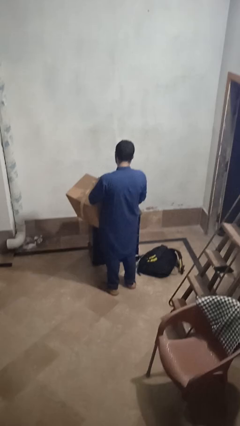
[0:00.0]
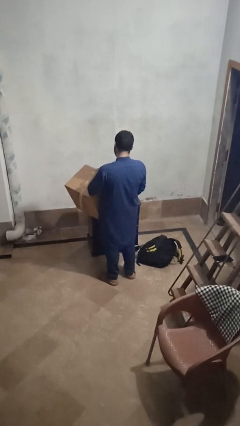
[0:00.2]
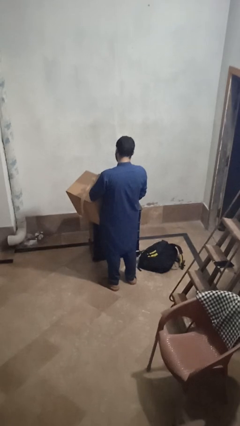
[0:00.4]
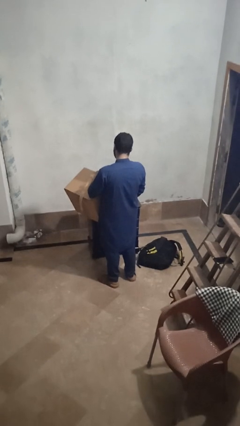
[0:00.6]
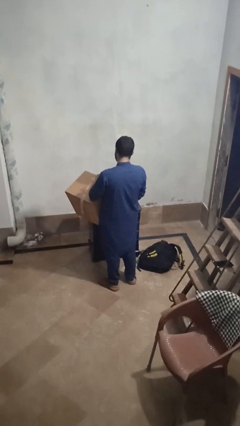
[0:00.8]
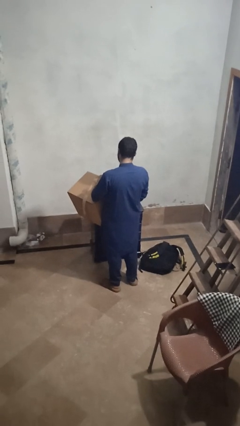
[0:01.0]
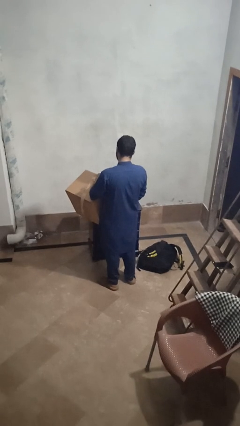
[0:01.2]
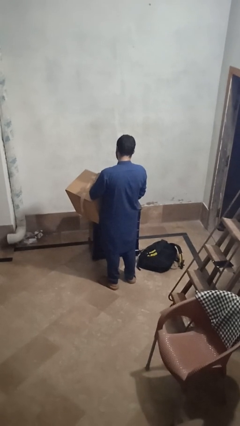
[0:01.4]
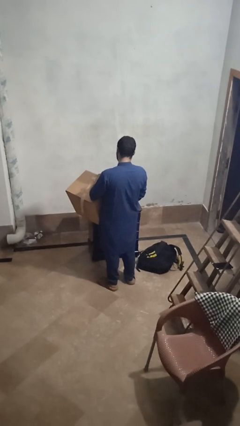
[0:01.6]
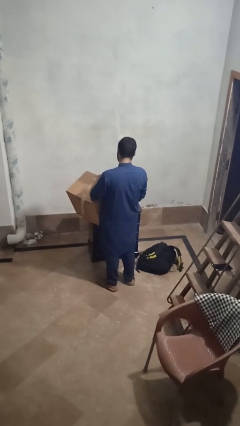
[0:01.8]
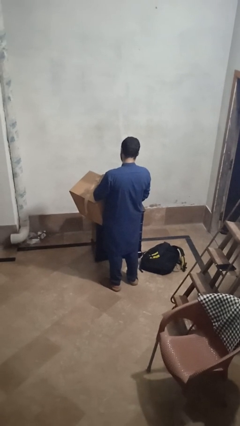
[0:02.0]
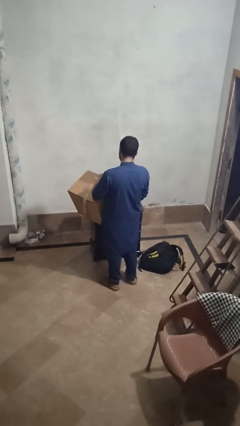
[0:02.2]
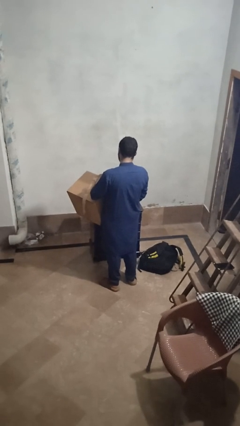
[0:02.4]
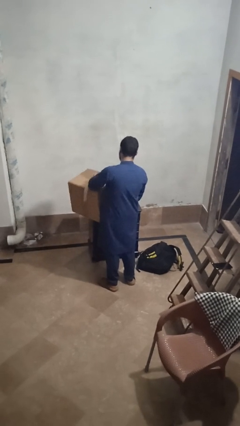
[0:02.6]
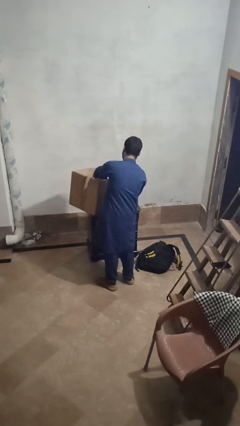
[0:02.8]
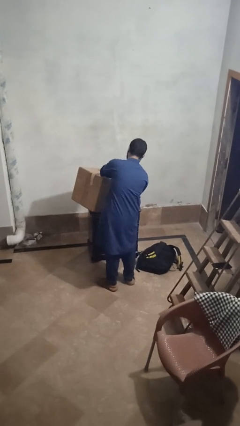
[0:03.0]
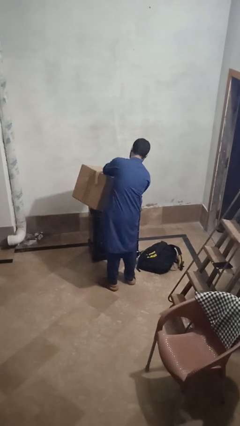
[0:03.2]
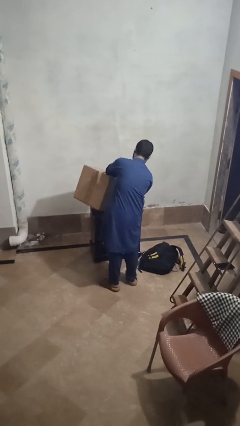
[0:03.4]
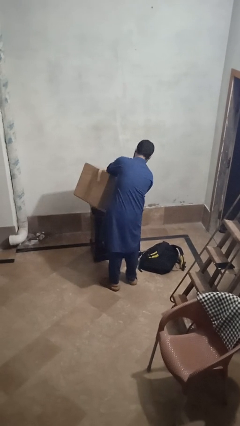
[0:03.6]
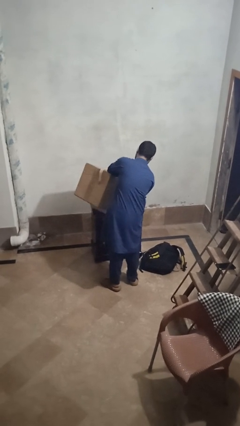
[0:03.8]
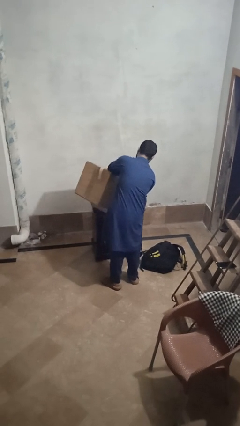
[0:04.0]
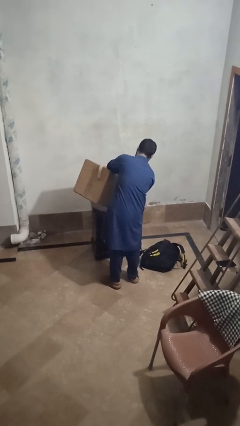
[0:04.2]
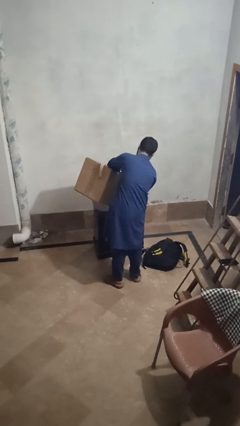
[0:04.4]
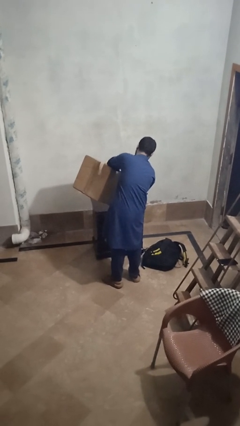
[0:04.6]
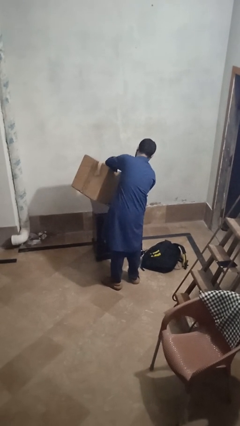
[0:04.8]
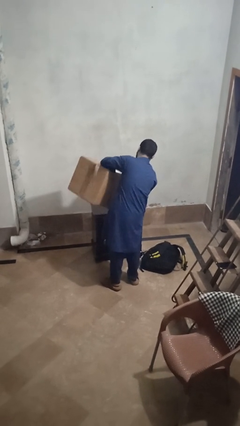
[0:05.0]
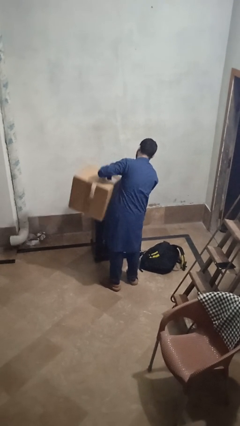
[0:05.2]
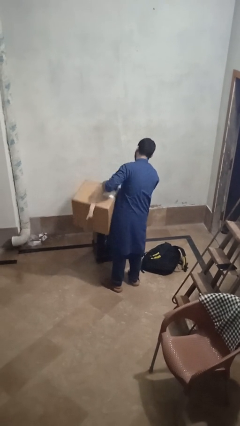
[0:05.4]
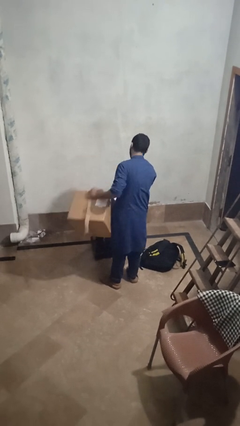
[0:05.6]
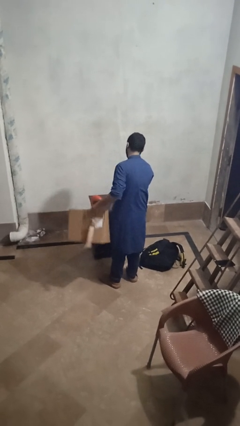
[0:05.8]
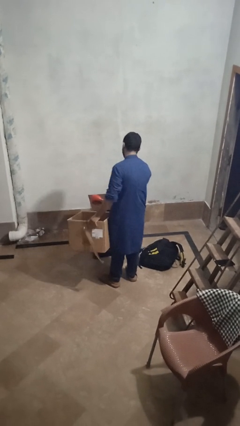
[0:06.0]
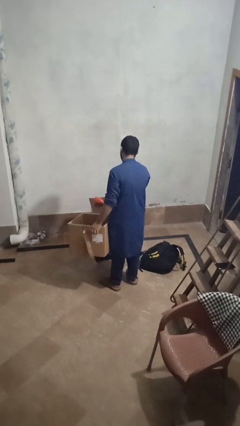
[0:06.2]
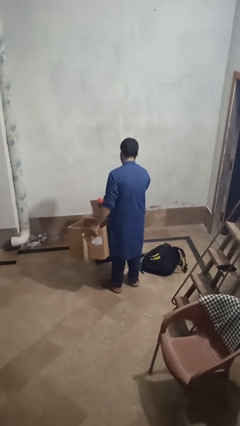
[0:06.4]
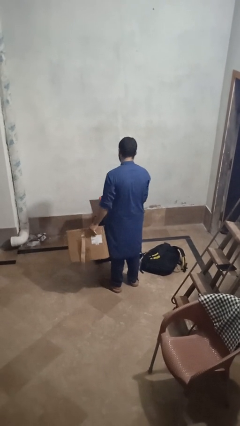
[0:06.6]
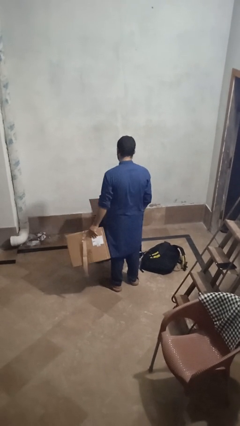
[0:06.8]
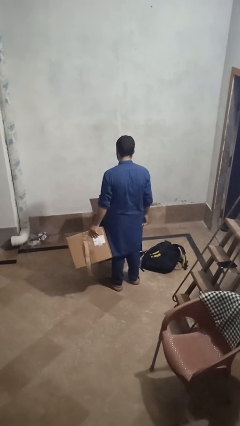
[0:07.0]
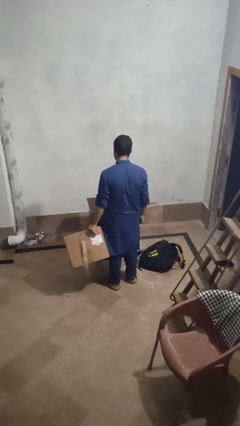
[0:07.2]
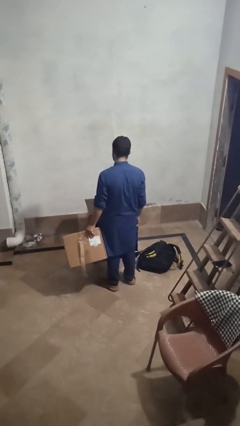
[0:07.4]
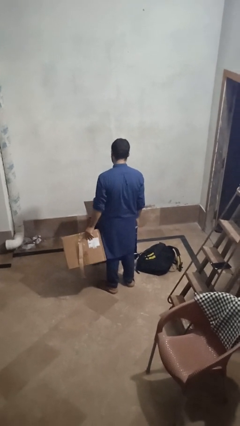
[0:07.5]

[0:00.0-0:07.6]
person unloads box onto table

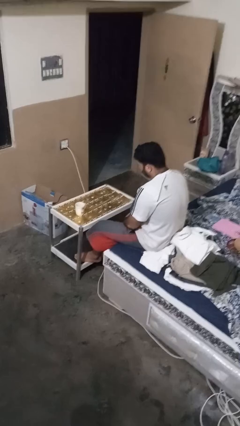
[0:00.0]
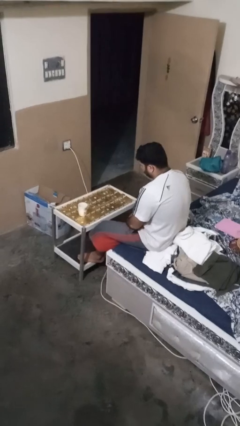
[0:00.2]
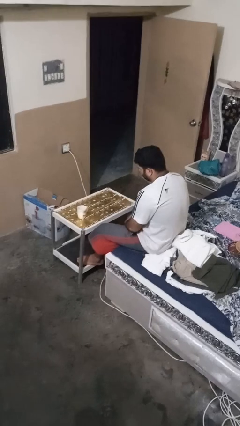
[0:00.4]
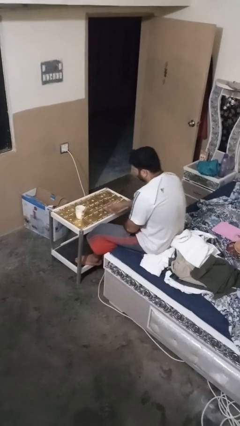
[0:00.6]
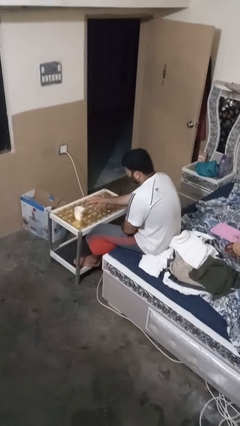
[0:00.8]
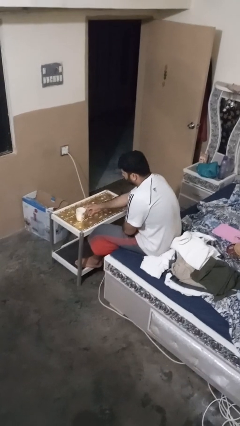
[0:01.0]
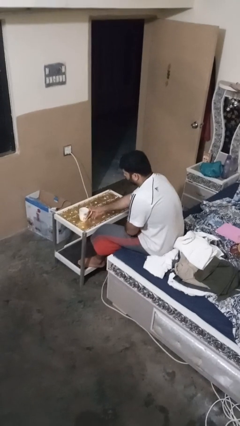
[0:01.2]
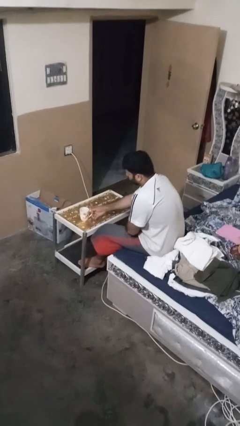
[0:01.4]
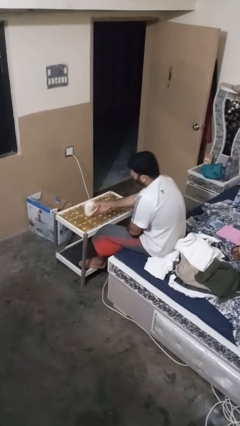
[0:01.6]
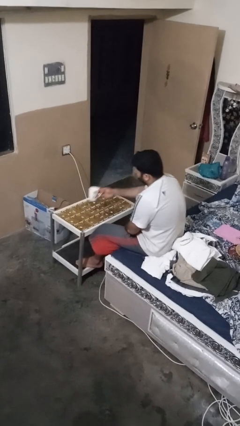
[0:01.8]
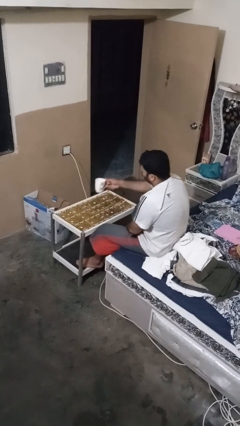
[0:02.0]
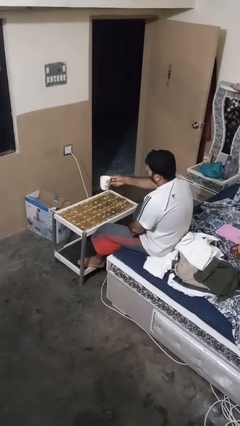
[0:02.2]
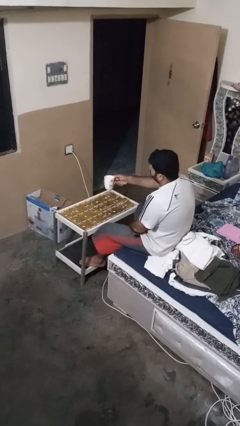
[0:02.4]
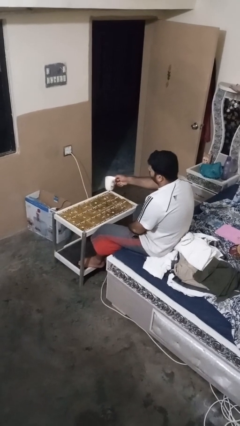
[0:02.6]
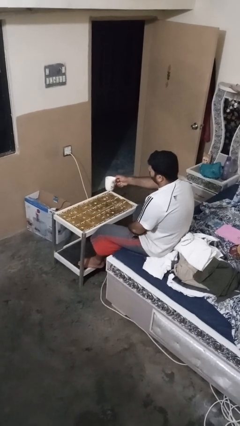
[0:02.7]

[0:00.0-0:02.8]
person picks up object from table

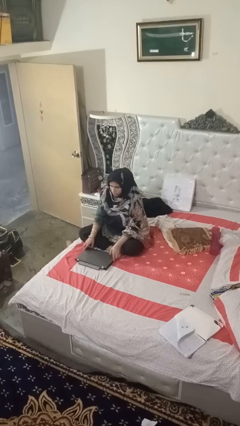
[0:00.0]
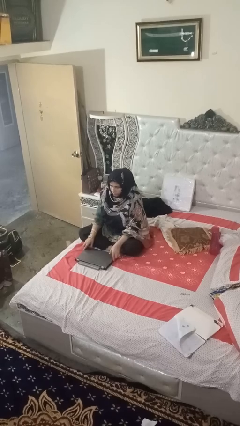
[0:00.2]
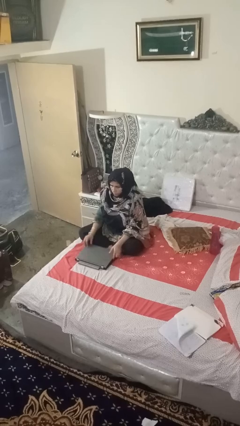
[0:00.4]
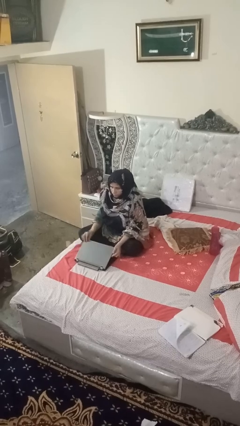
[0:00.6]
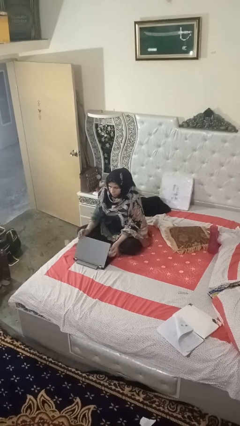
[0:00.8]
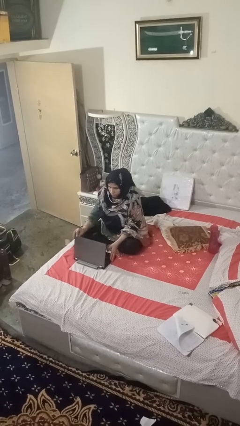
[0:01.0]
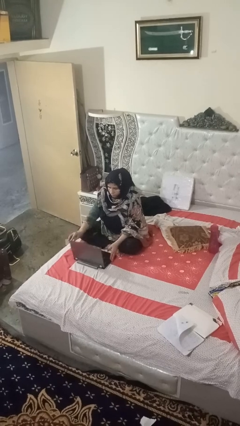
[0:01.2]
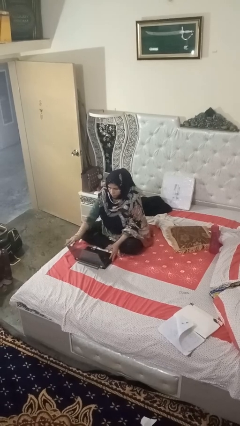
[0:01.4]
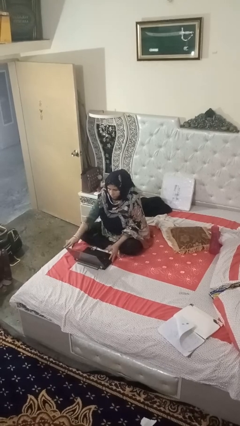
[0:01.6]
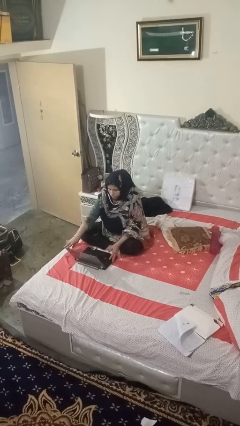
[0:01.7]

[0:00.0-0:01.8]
person opens laptop

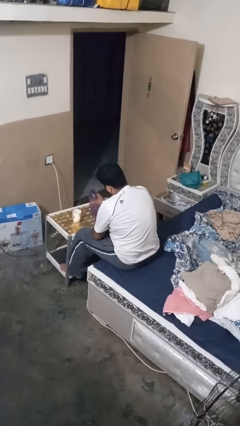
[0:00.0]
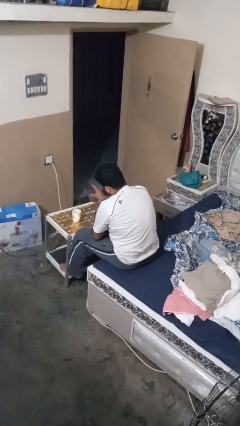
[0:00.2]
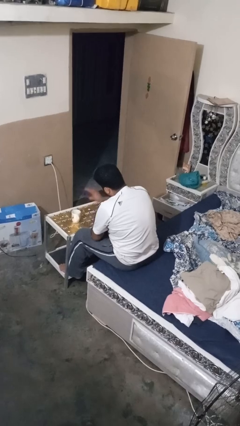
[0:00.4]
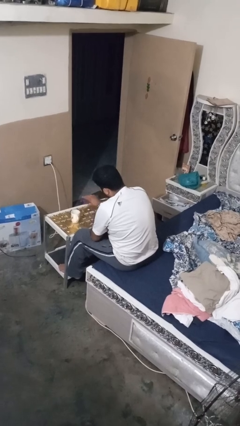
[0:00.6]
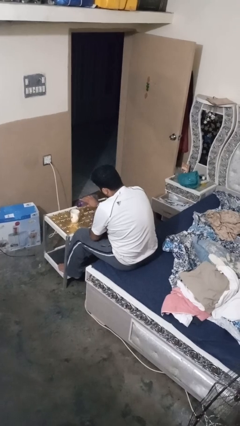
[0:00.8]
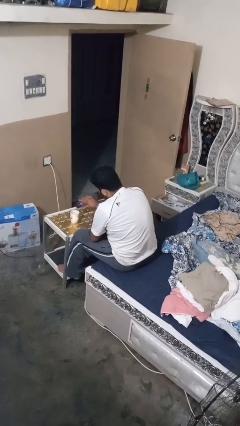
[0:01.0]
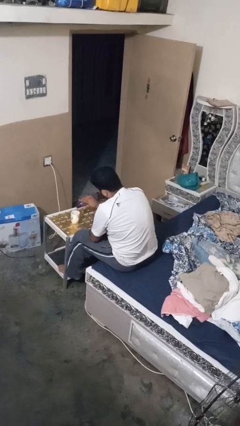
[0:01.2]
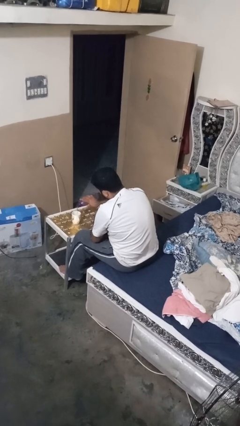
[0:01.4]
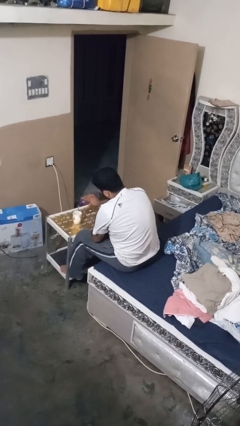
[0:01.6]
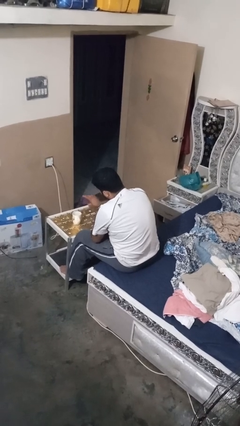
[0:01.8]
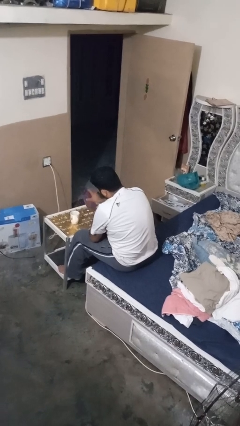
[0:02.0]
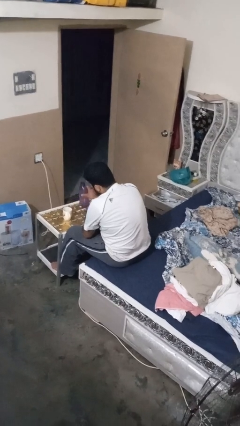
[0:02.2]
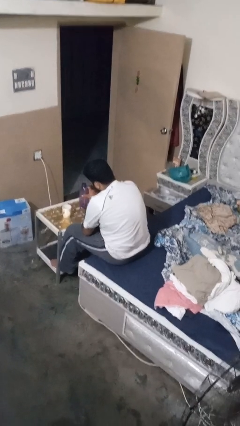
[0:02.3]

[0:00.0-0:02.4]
person pours liquid into cup

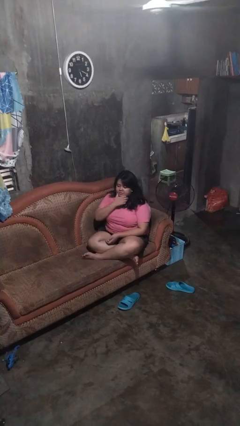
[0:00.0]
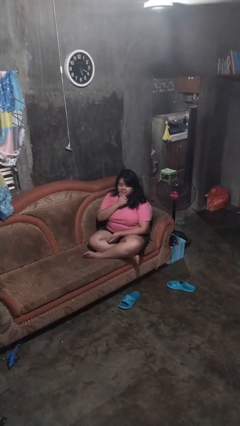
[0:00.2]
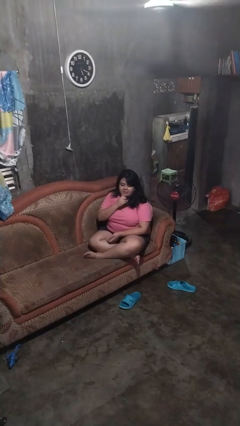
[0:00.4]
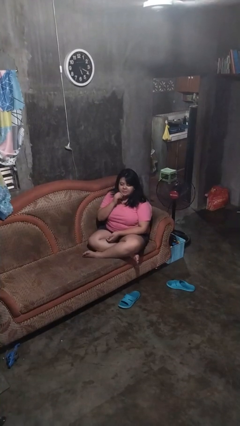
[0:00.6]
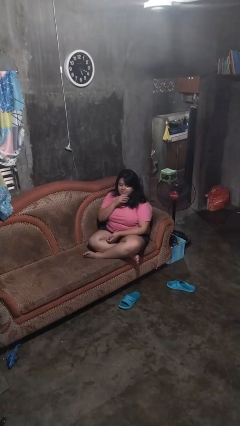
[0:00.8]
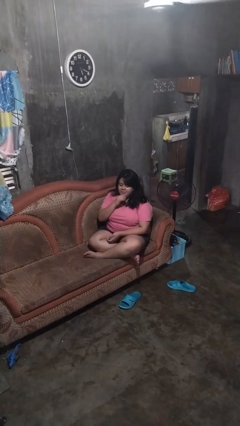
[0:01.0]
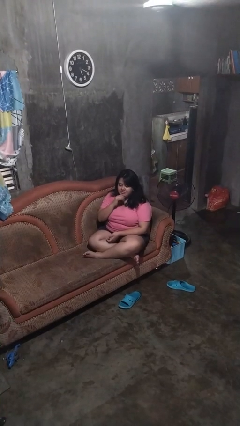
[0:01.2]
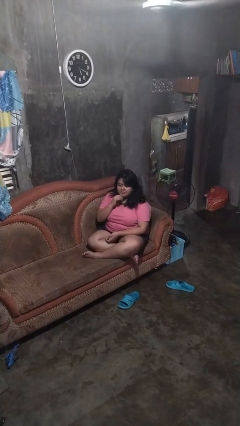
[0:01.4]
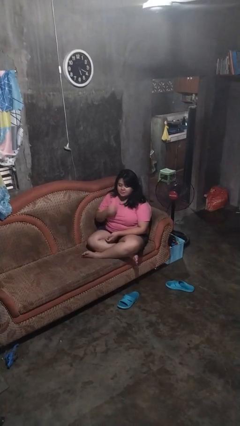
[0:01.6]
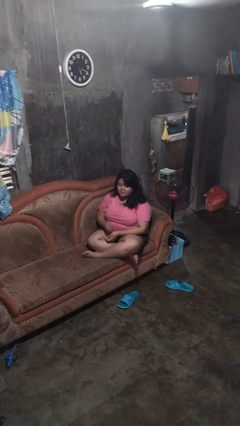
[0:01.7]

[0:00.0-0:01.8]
person strokes chin

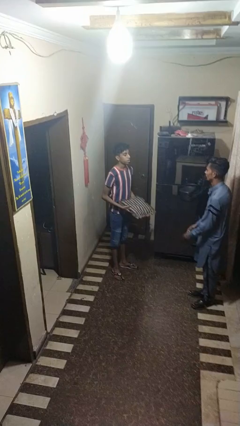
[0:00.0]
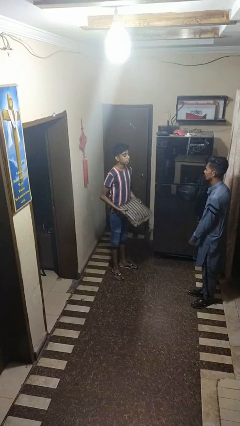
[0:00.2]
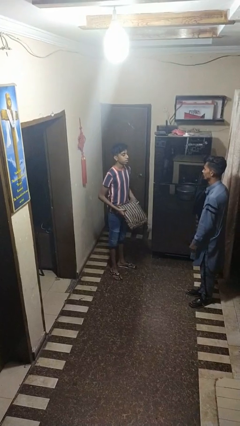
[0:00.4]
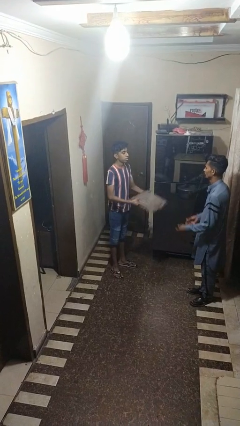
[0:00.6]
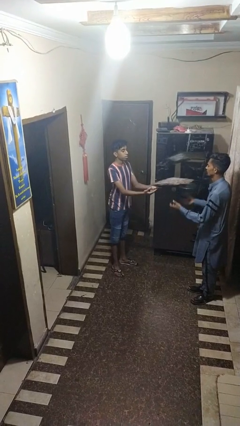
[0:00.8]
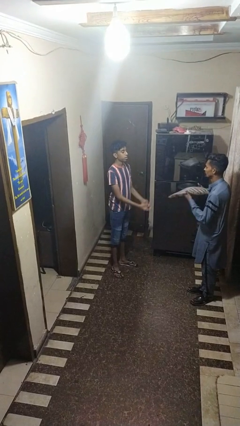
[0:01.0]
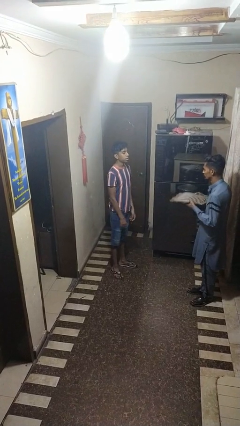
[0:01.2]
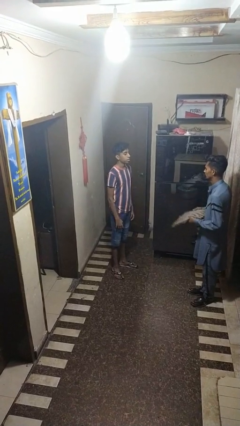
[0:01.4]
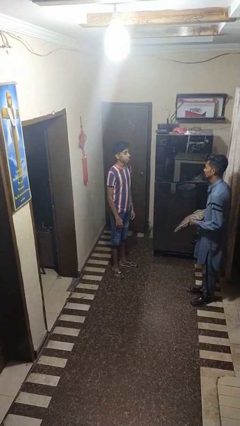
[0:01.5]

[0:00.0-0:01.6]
person throws object to person
